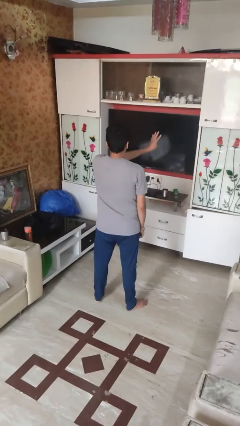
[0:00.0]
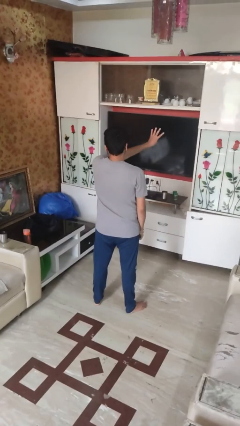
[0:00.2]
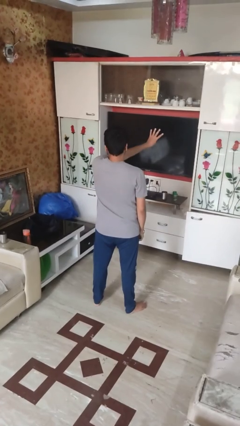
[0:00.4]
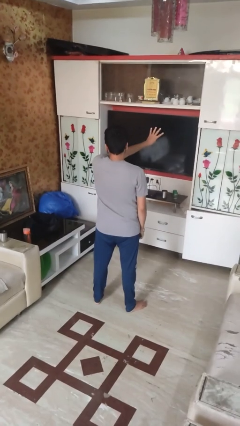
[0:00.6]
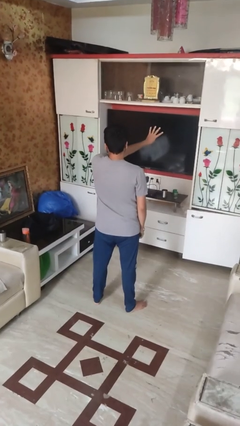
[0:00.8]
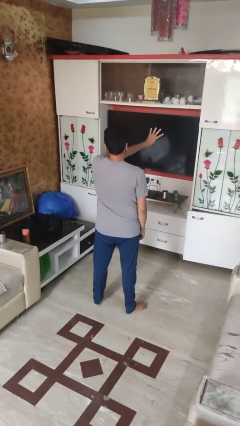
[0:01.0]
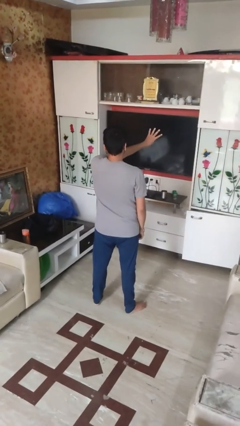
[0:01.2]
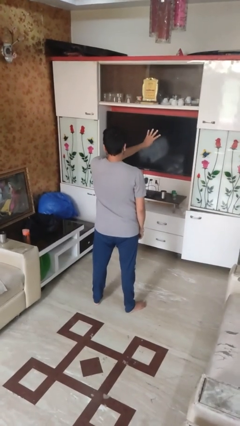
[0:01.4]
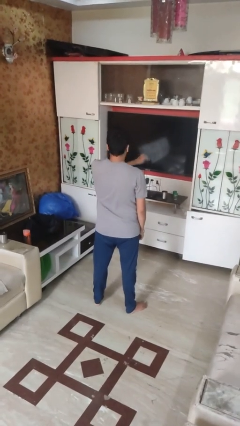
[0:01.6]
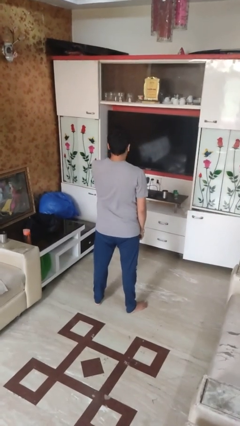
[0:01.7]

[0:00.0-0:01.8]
person gestures number four

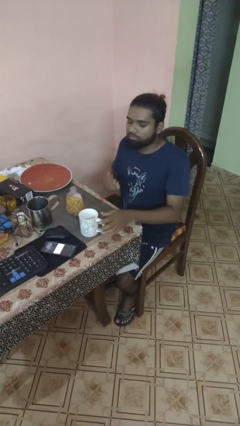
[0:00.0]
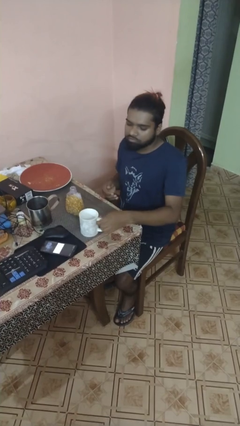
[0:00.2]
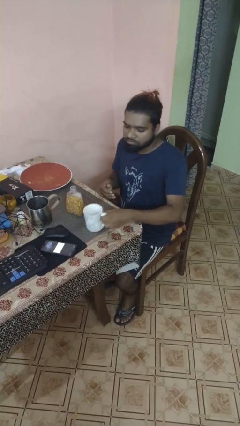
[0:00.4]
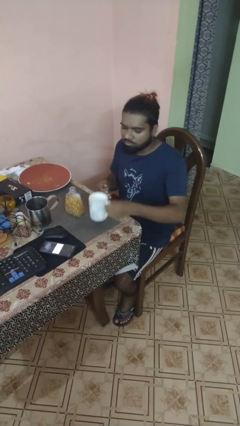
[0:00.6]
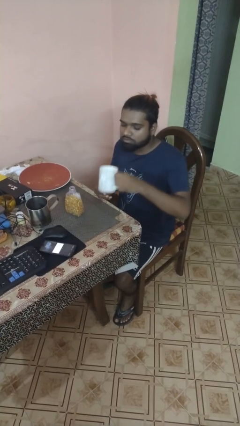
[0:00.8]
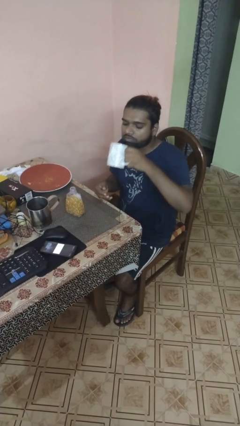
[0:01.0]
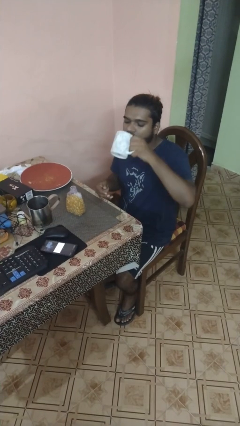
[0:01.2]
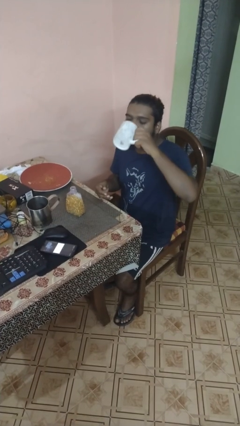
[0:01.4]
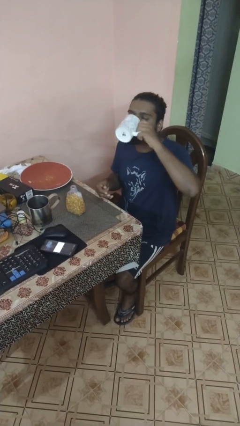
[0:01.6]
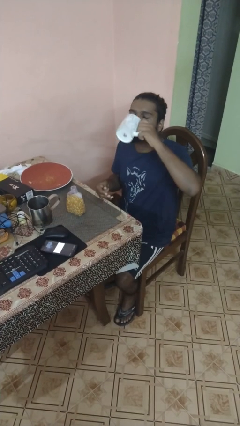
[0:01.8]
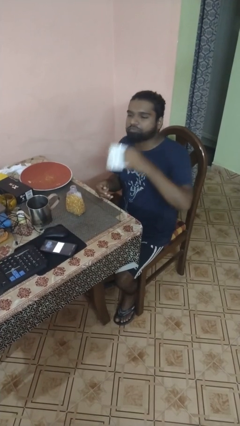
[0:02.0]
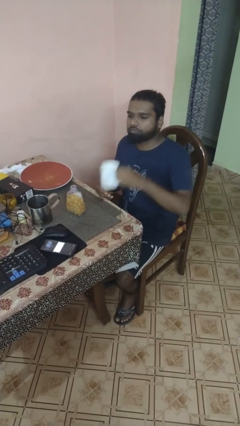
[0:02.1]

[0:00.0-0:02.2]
person drinks from cup

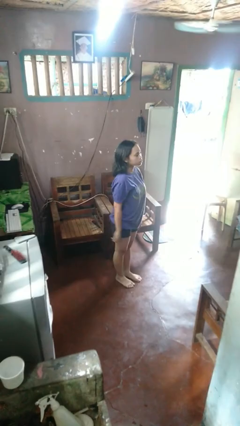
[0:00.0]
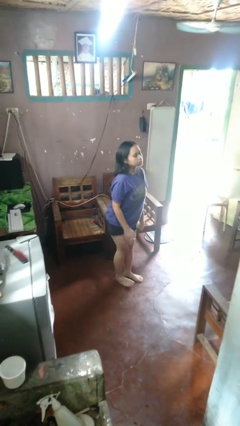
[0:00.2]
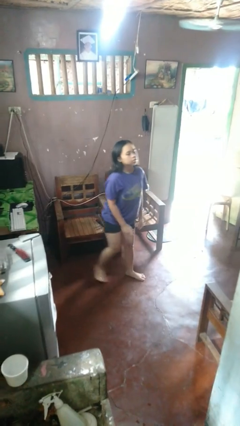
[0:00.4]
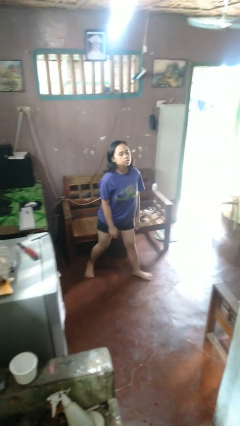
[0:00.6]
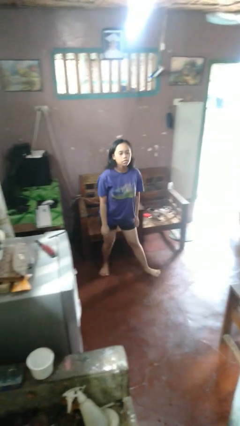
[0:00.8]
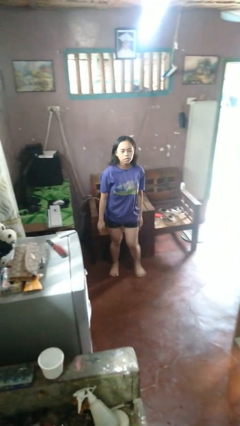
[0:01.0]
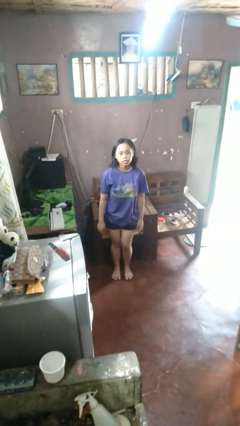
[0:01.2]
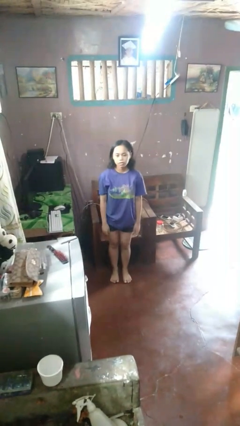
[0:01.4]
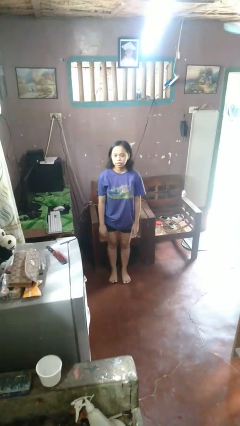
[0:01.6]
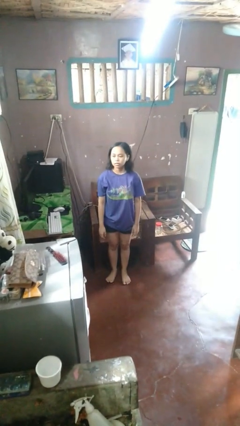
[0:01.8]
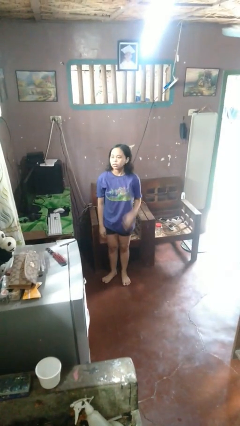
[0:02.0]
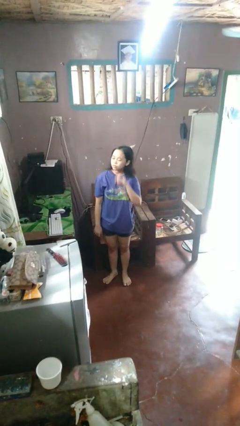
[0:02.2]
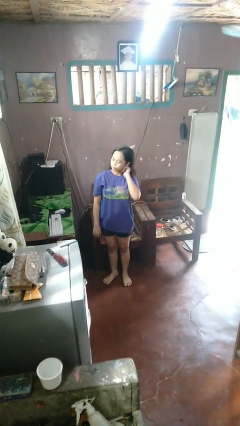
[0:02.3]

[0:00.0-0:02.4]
person rubs neck

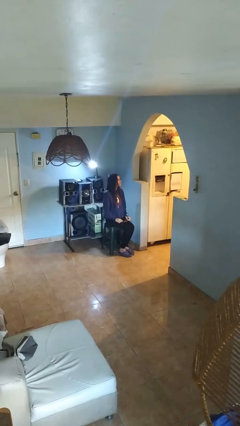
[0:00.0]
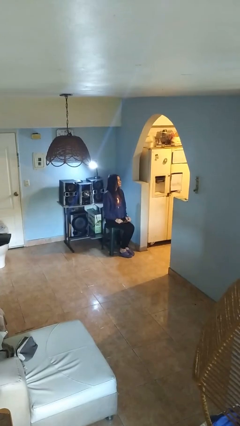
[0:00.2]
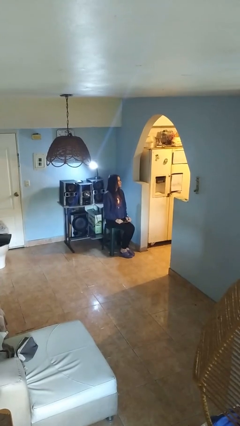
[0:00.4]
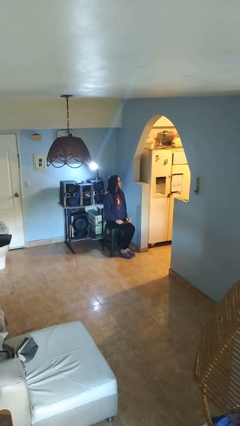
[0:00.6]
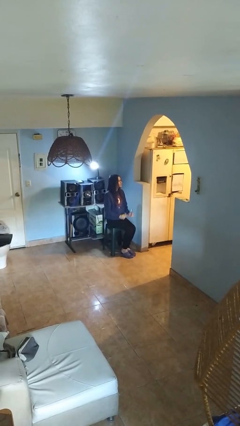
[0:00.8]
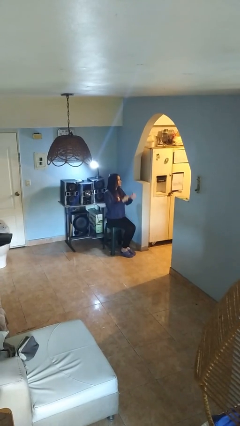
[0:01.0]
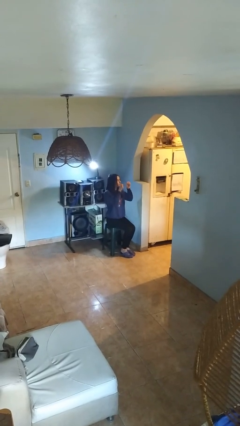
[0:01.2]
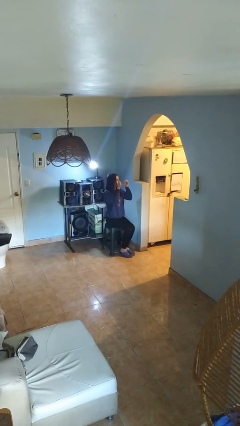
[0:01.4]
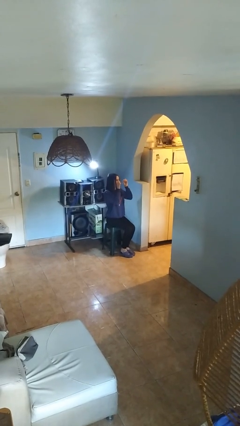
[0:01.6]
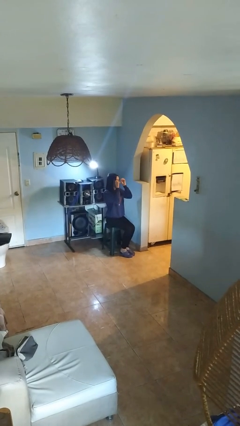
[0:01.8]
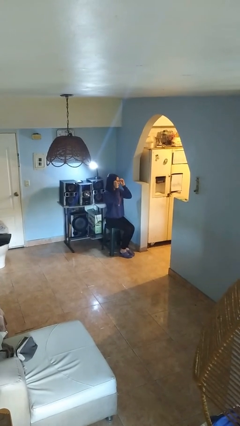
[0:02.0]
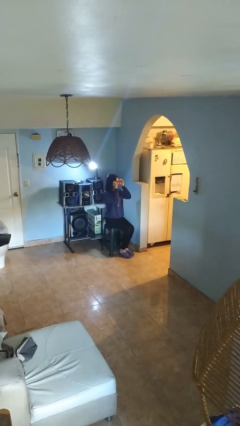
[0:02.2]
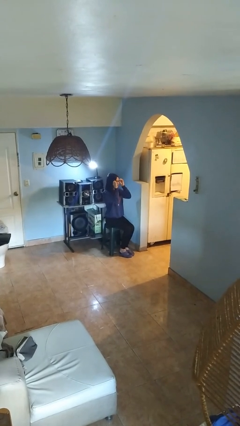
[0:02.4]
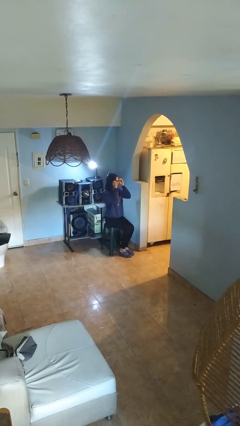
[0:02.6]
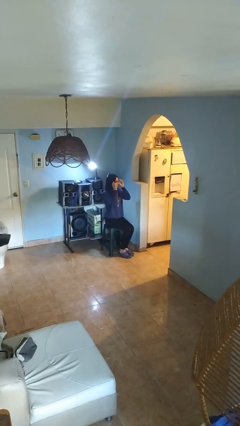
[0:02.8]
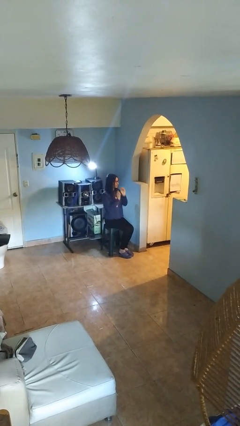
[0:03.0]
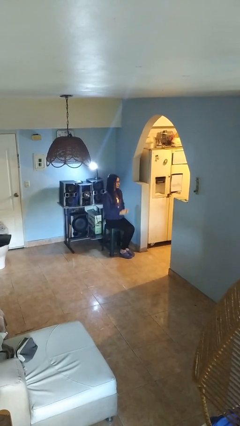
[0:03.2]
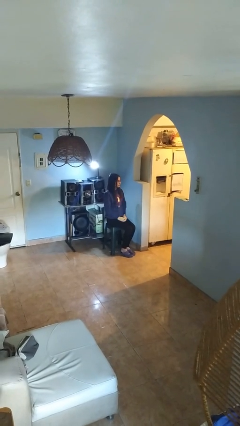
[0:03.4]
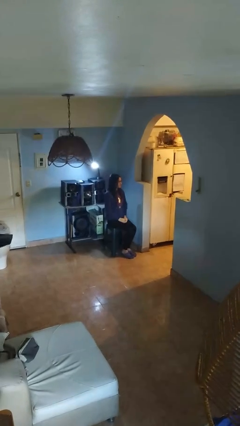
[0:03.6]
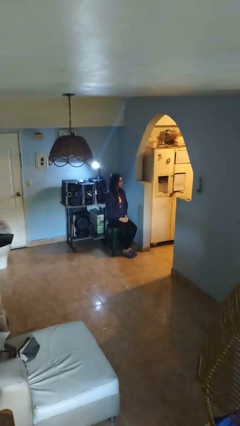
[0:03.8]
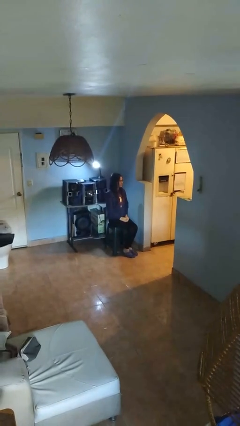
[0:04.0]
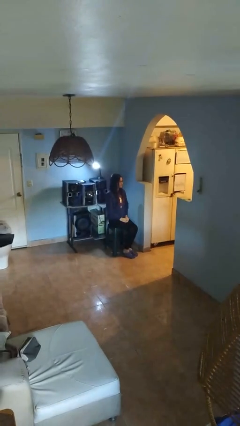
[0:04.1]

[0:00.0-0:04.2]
person puts on glasses

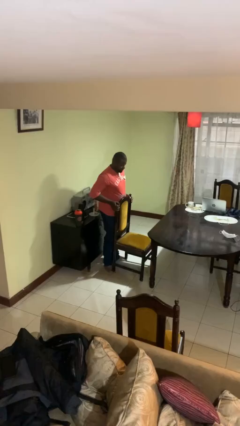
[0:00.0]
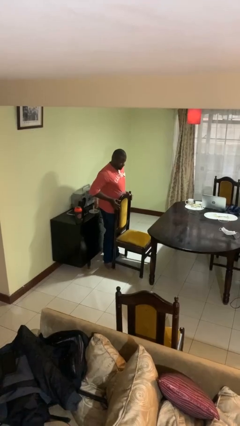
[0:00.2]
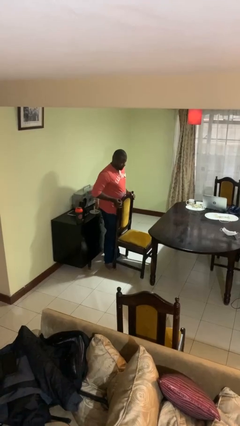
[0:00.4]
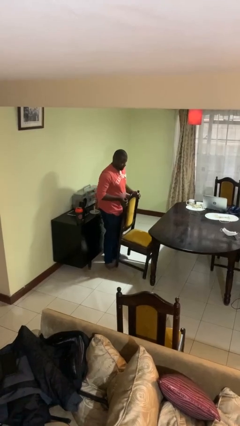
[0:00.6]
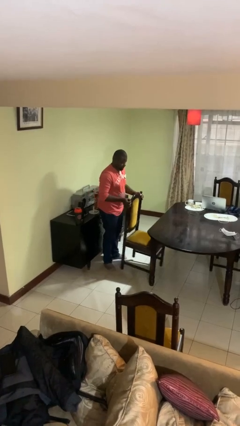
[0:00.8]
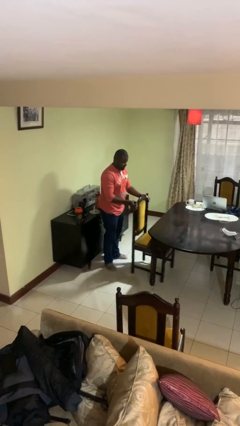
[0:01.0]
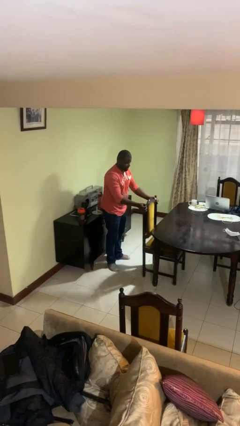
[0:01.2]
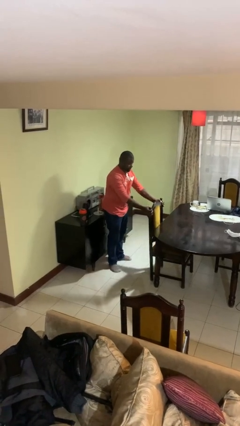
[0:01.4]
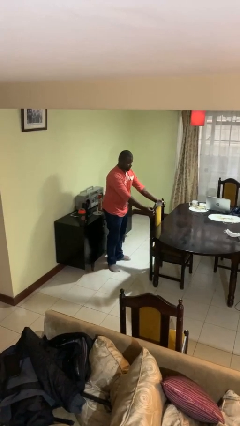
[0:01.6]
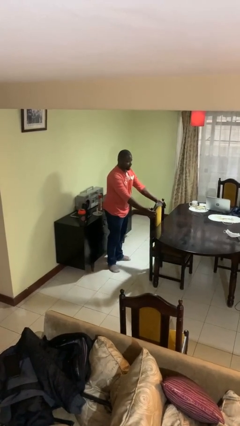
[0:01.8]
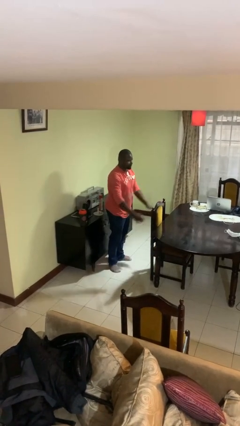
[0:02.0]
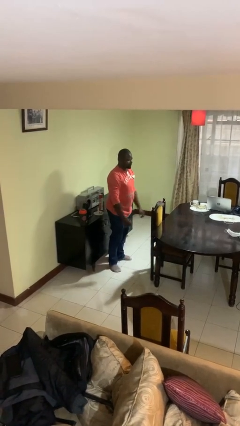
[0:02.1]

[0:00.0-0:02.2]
person pushes in chair

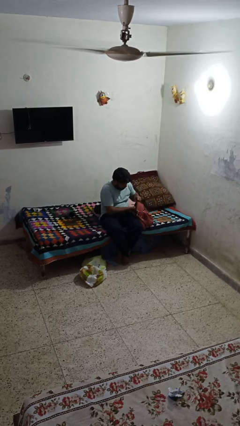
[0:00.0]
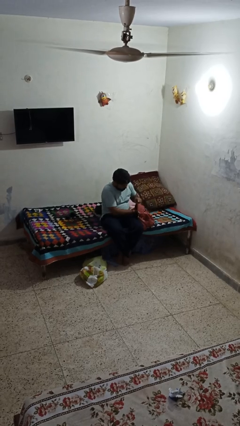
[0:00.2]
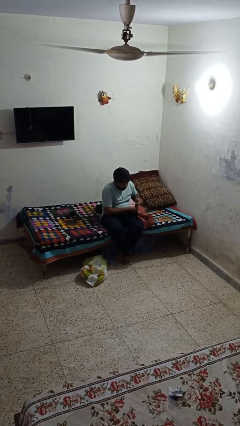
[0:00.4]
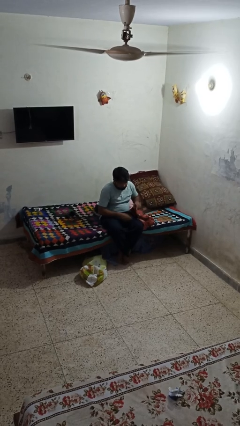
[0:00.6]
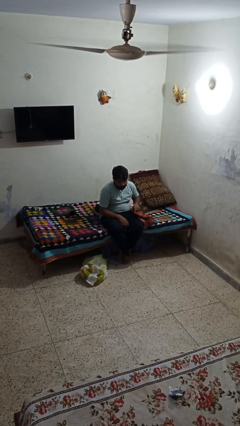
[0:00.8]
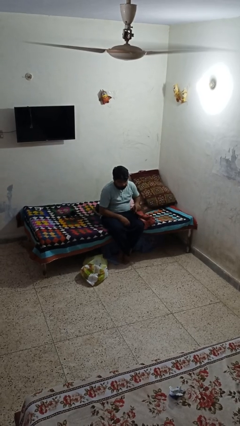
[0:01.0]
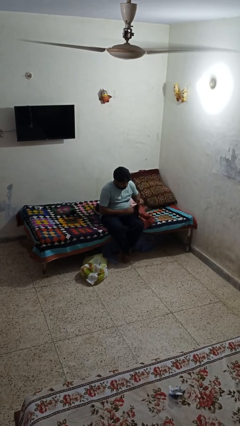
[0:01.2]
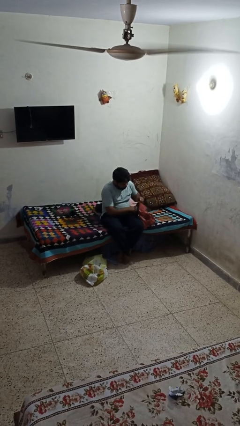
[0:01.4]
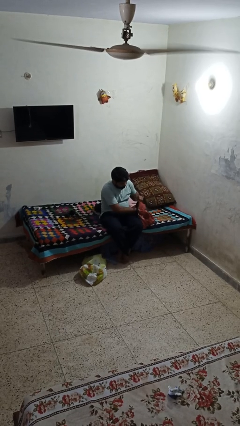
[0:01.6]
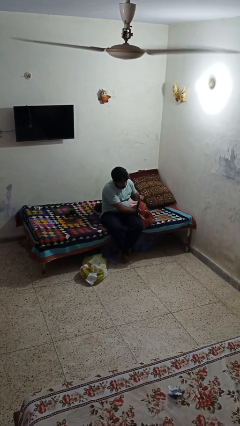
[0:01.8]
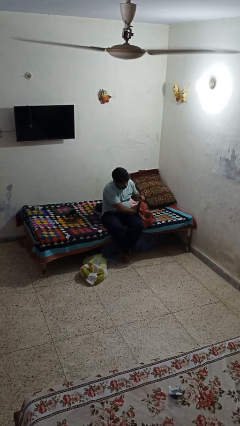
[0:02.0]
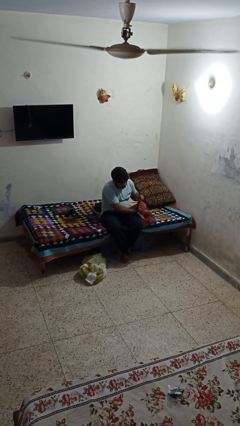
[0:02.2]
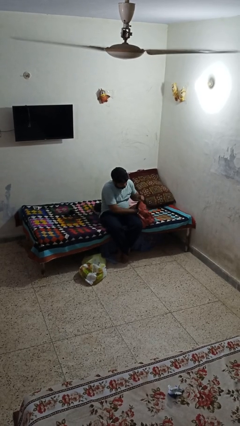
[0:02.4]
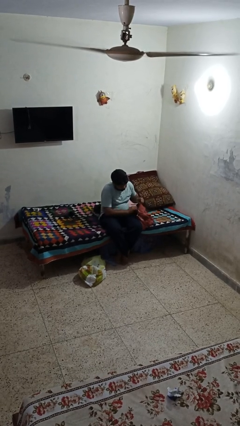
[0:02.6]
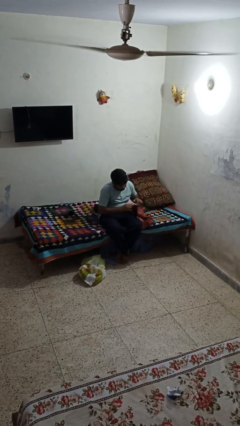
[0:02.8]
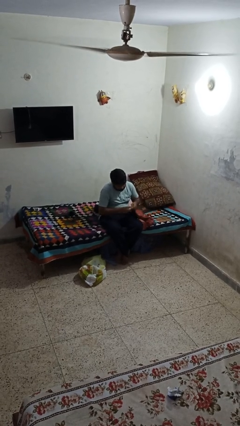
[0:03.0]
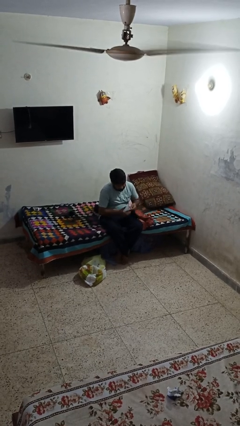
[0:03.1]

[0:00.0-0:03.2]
person searches in purse

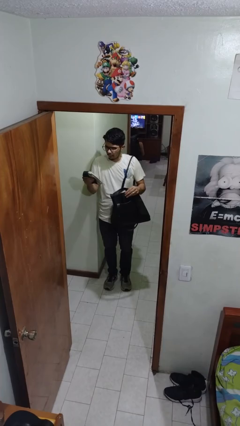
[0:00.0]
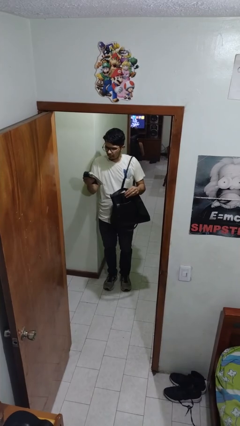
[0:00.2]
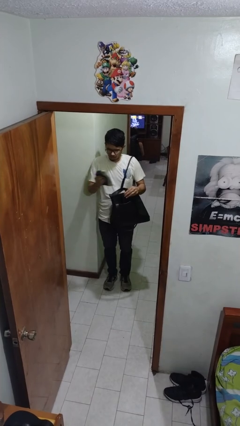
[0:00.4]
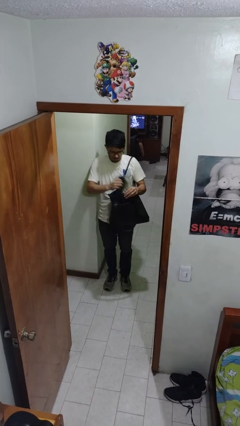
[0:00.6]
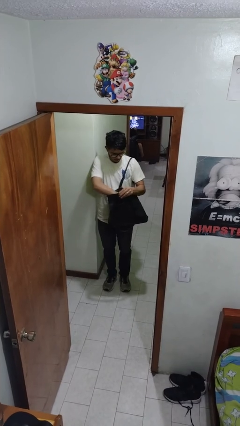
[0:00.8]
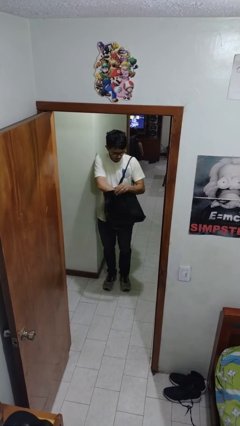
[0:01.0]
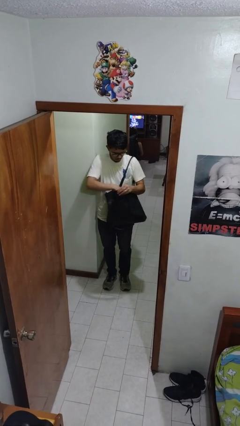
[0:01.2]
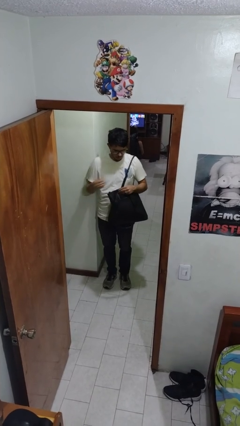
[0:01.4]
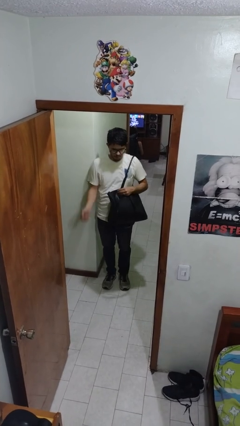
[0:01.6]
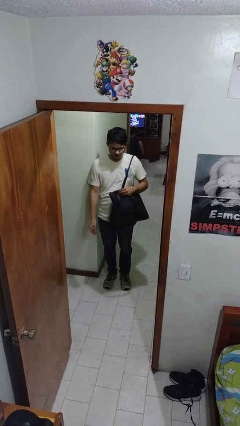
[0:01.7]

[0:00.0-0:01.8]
person puts object into purse
